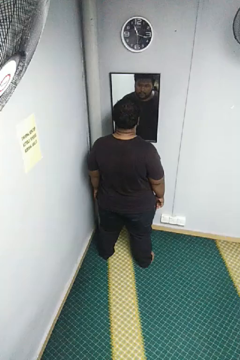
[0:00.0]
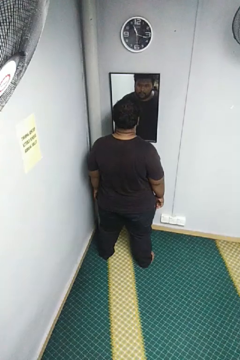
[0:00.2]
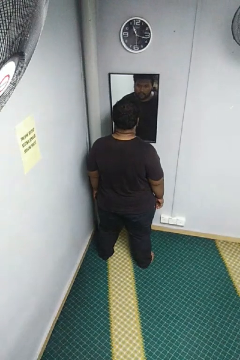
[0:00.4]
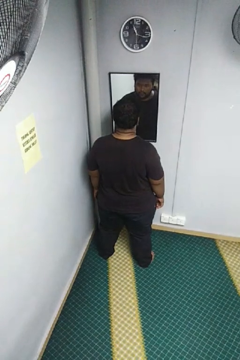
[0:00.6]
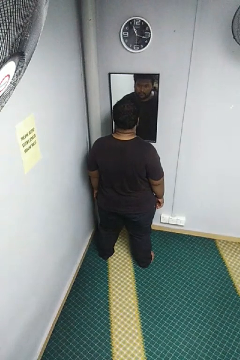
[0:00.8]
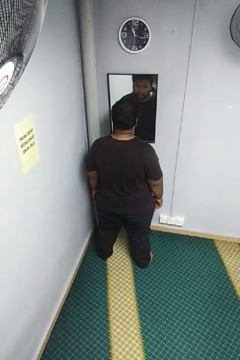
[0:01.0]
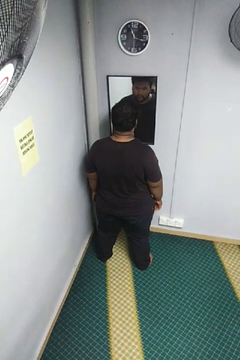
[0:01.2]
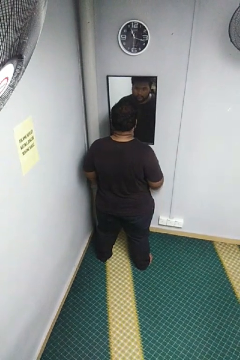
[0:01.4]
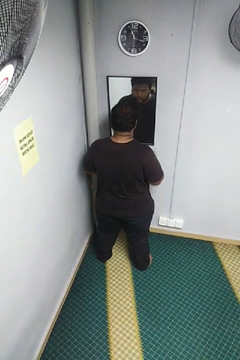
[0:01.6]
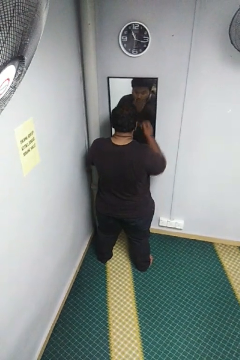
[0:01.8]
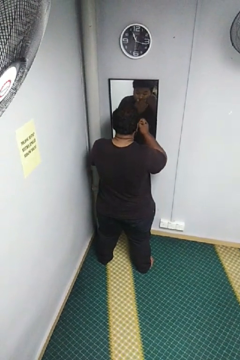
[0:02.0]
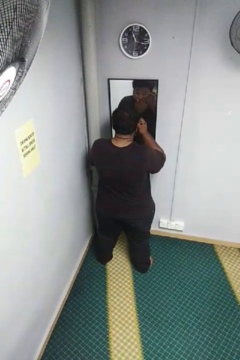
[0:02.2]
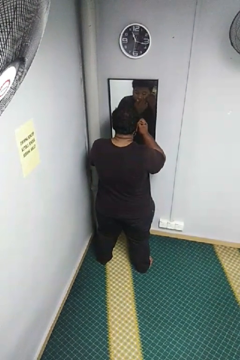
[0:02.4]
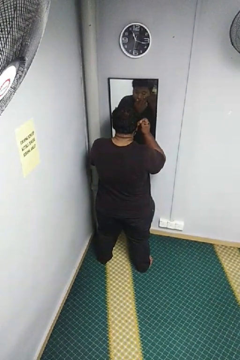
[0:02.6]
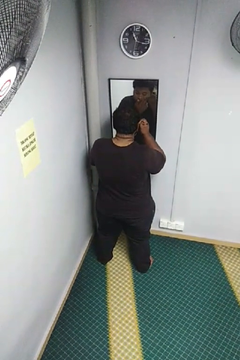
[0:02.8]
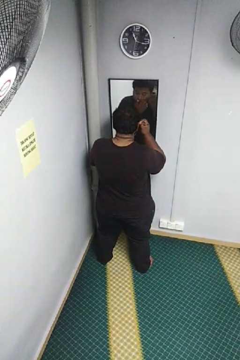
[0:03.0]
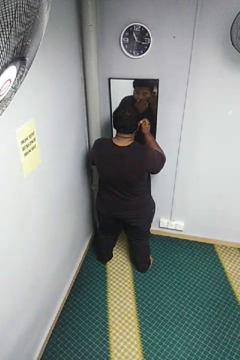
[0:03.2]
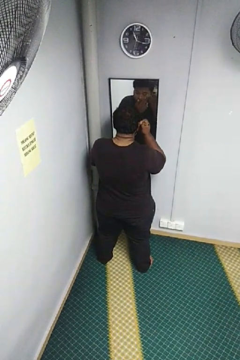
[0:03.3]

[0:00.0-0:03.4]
person applies eye makeup

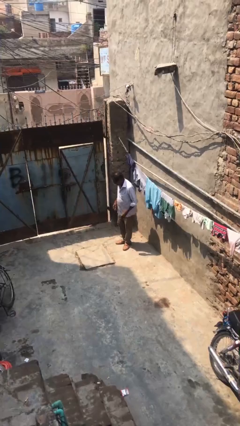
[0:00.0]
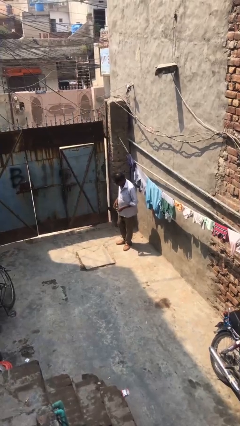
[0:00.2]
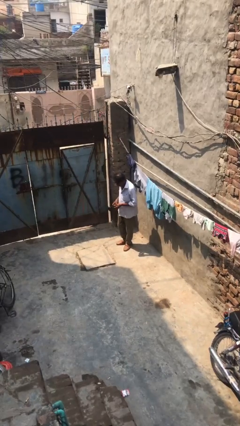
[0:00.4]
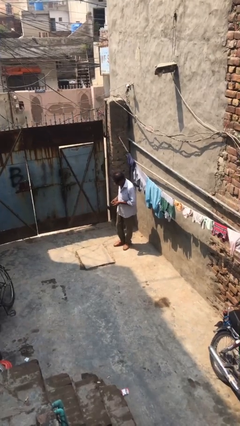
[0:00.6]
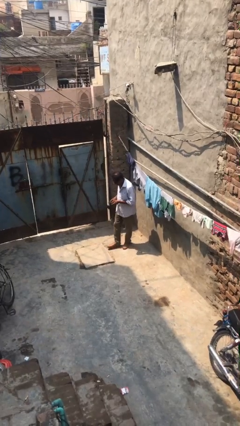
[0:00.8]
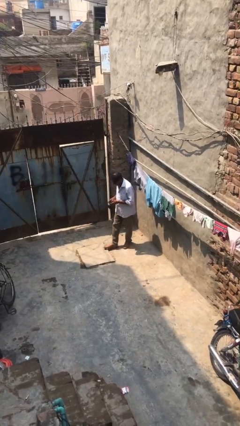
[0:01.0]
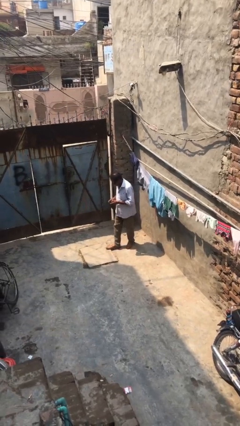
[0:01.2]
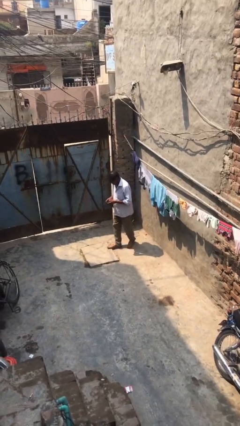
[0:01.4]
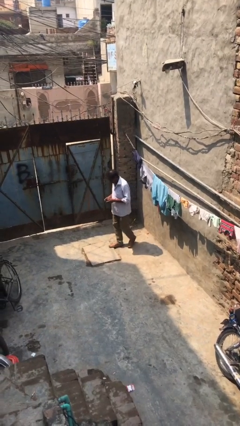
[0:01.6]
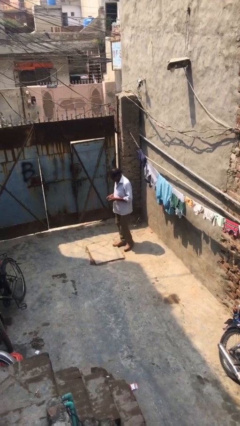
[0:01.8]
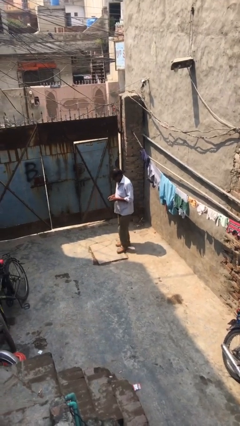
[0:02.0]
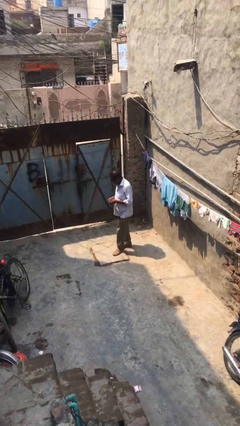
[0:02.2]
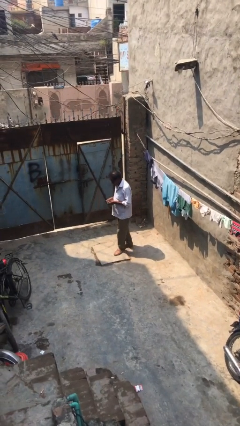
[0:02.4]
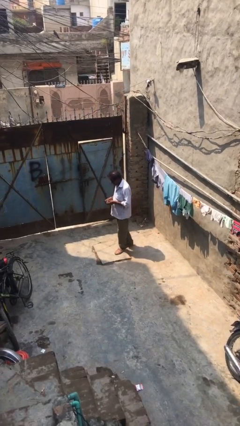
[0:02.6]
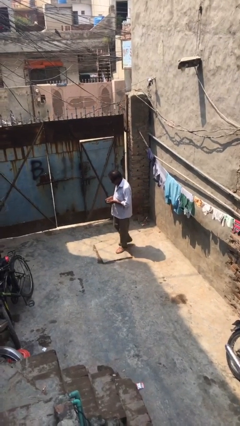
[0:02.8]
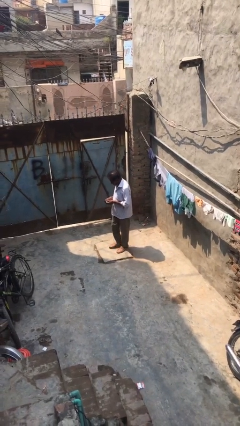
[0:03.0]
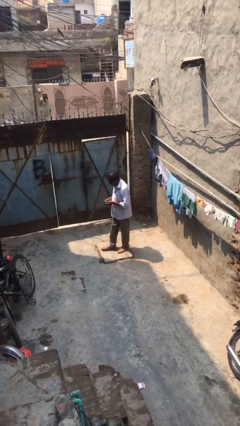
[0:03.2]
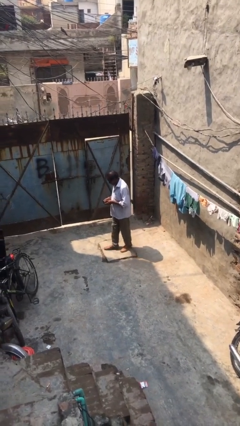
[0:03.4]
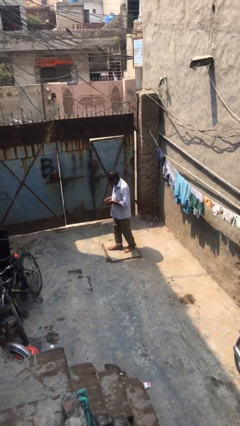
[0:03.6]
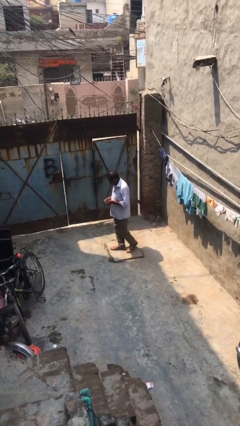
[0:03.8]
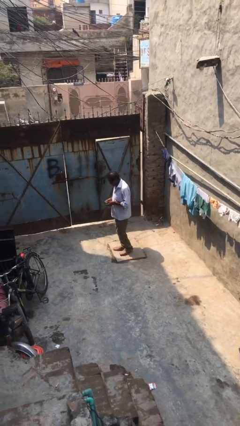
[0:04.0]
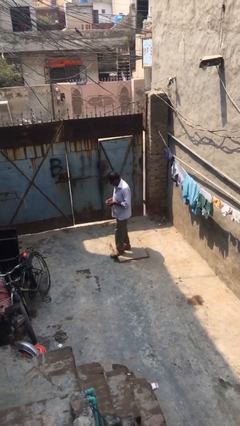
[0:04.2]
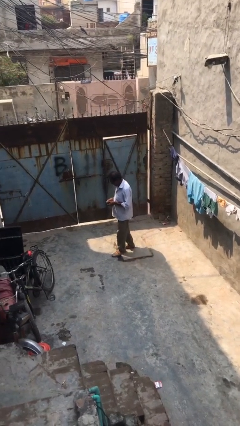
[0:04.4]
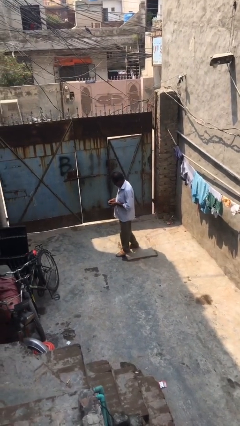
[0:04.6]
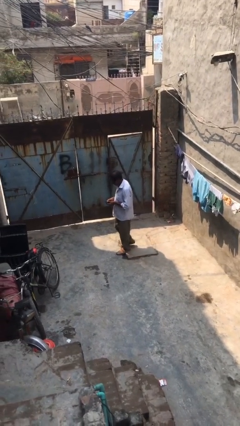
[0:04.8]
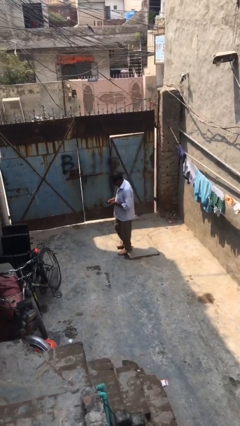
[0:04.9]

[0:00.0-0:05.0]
person texts on phone

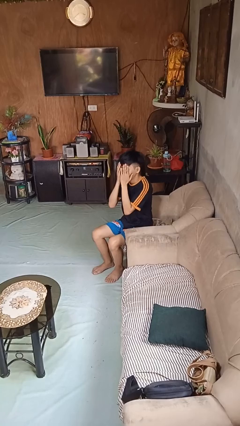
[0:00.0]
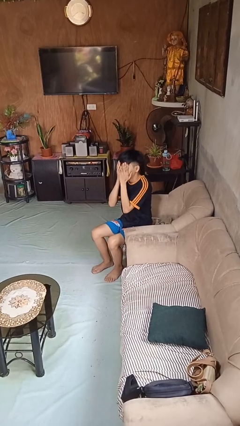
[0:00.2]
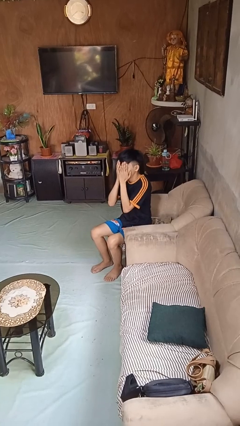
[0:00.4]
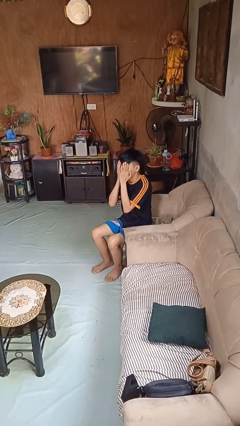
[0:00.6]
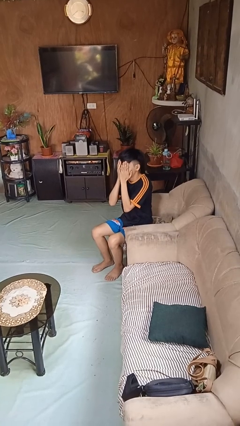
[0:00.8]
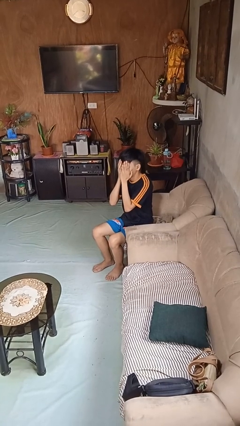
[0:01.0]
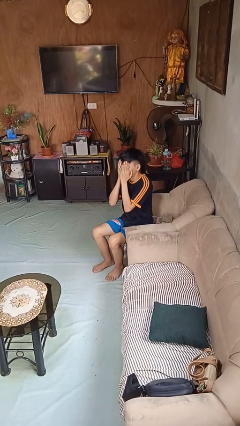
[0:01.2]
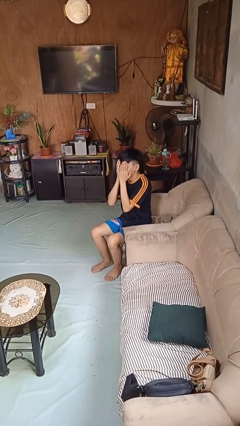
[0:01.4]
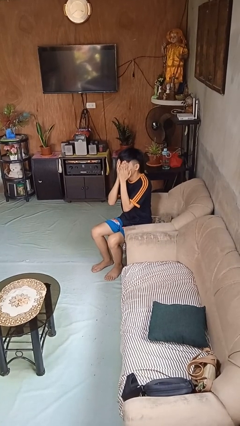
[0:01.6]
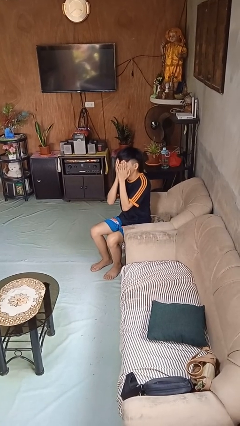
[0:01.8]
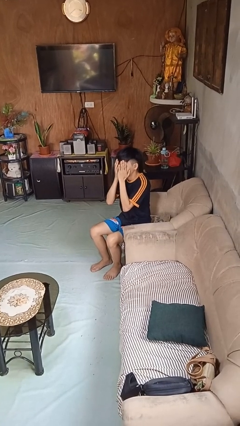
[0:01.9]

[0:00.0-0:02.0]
person covers face with hands

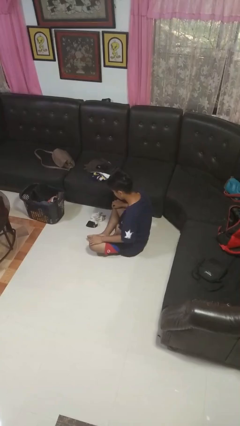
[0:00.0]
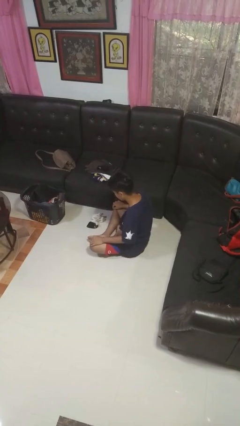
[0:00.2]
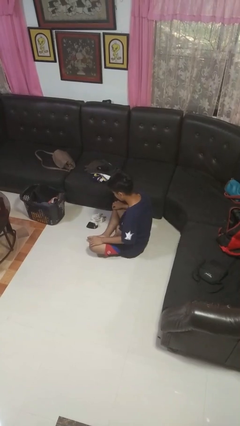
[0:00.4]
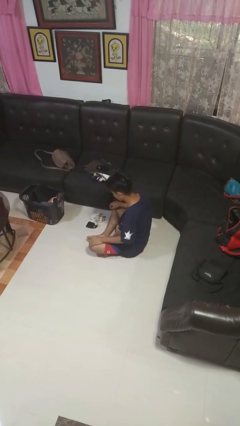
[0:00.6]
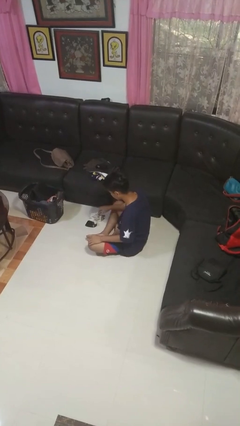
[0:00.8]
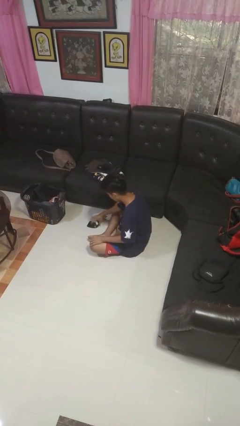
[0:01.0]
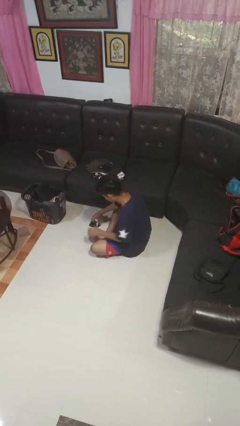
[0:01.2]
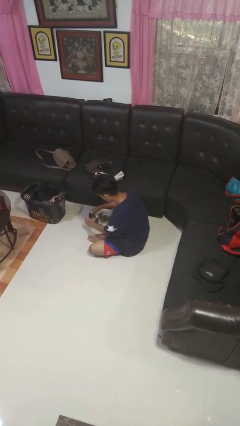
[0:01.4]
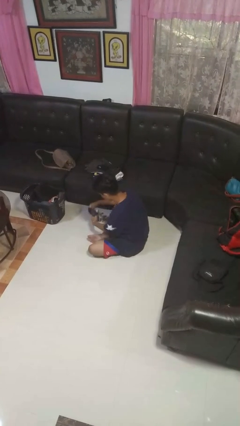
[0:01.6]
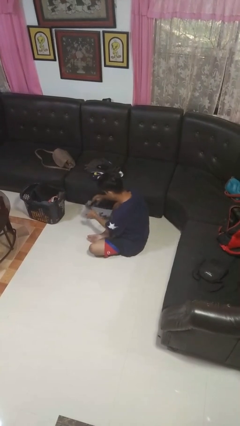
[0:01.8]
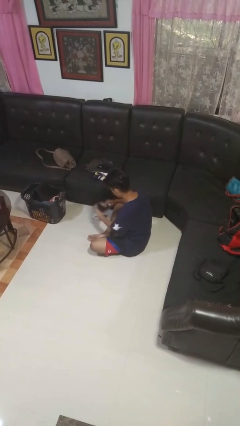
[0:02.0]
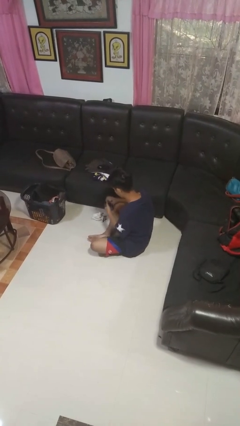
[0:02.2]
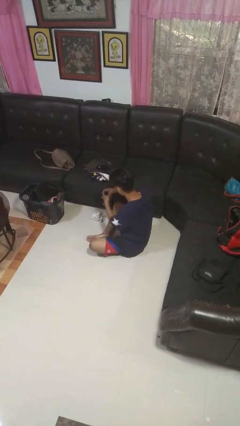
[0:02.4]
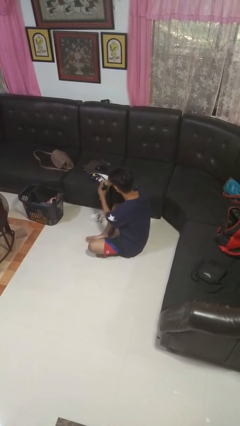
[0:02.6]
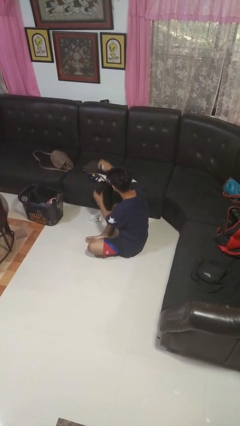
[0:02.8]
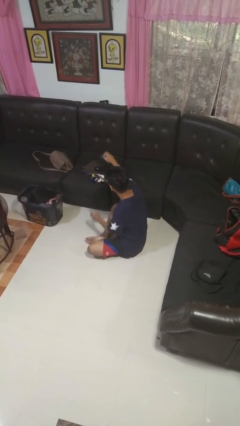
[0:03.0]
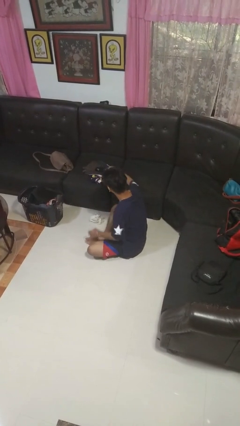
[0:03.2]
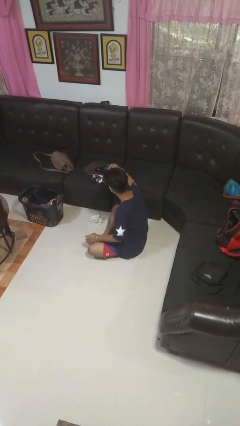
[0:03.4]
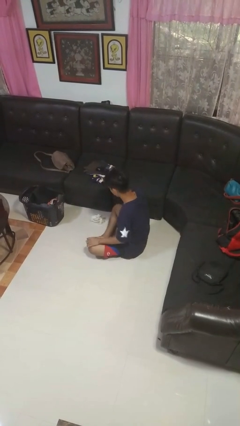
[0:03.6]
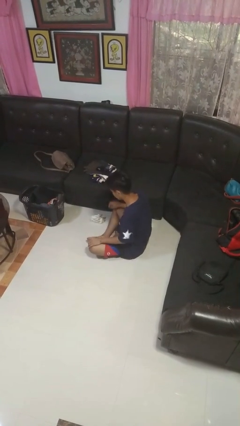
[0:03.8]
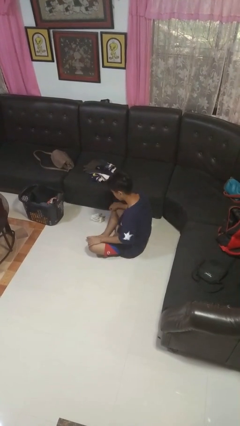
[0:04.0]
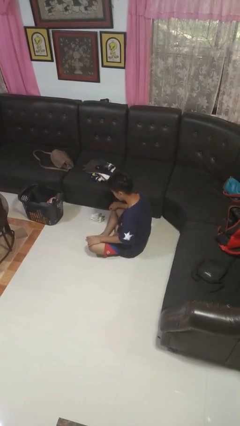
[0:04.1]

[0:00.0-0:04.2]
person folds socks

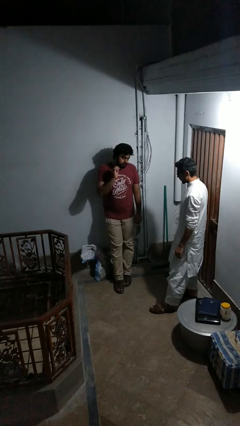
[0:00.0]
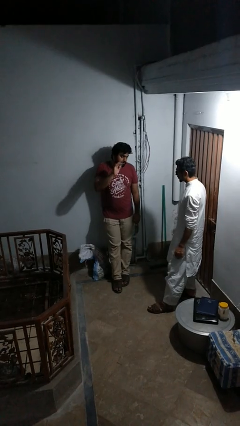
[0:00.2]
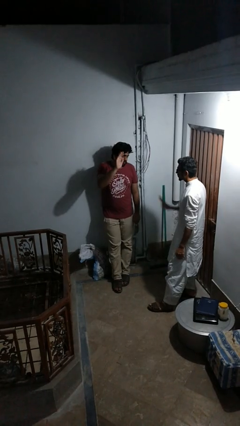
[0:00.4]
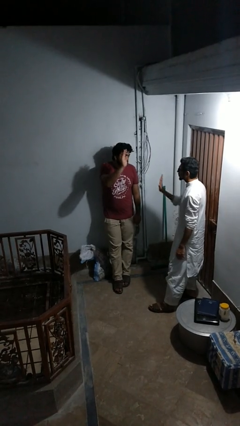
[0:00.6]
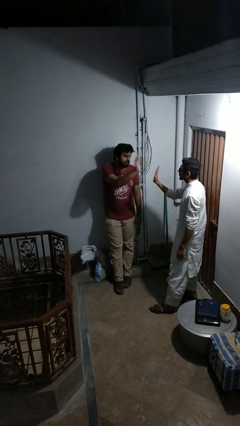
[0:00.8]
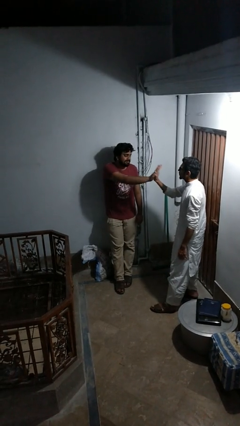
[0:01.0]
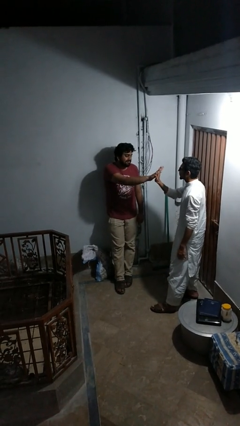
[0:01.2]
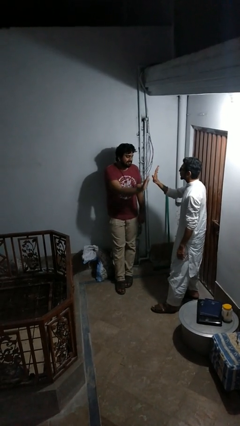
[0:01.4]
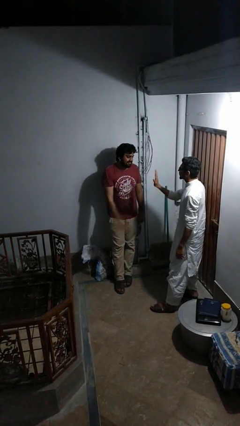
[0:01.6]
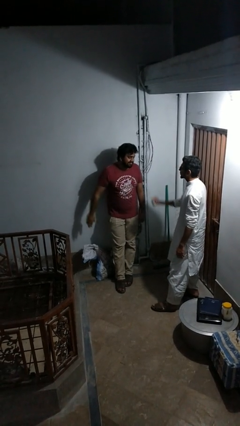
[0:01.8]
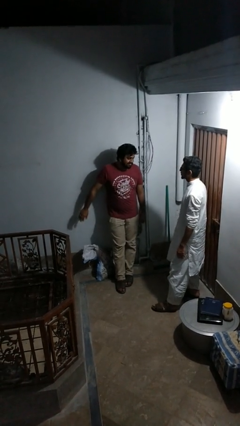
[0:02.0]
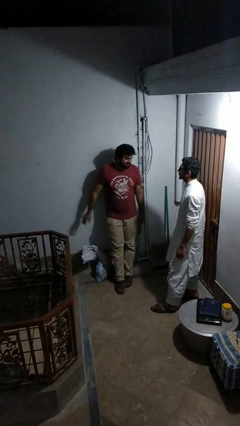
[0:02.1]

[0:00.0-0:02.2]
person highfives hand

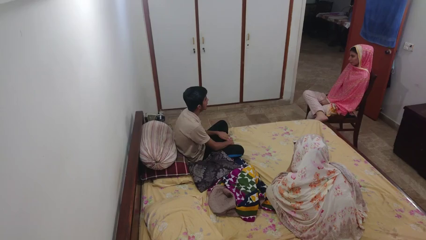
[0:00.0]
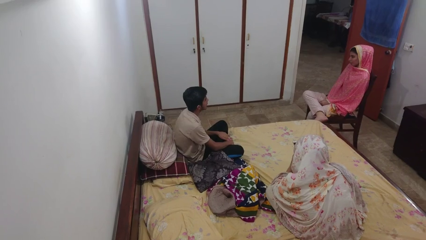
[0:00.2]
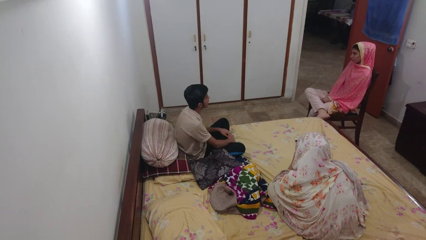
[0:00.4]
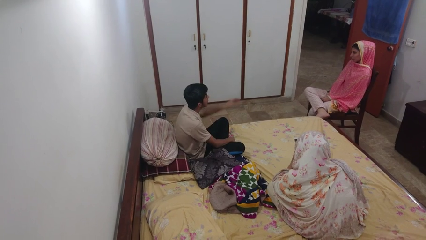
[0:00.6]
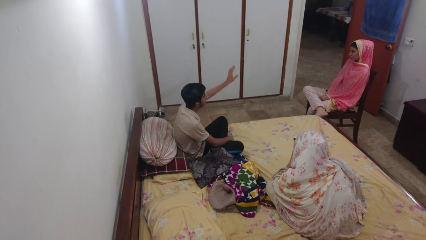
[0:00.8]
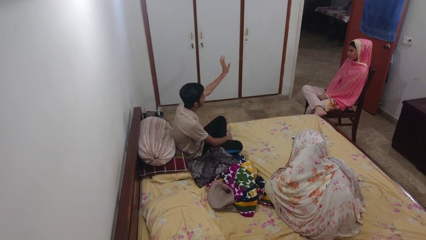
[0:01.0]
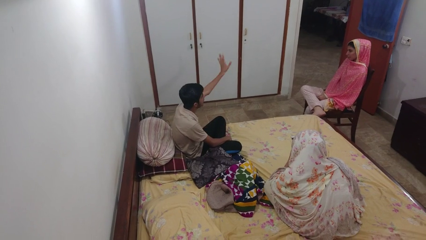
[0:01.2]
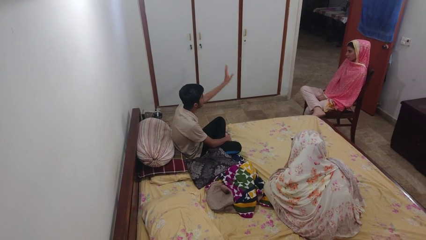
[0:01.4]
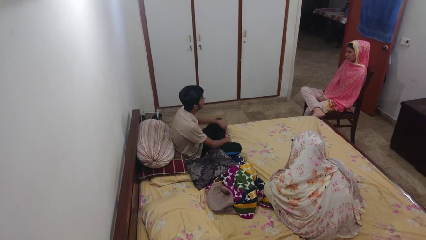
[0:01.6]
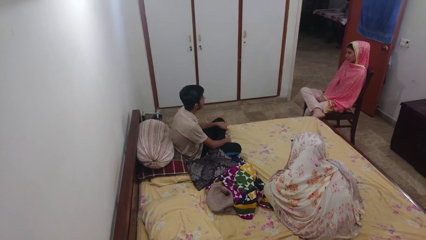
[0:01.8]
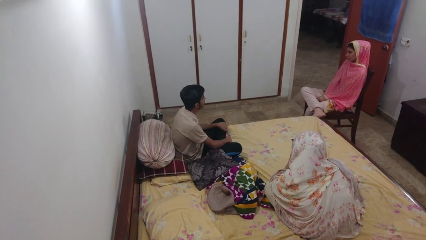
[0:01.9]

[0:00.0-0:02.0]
person waves at person
